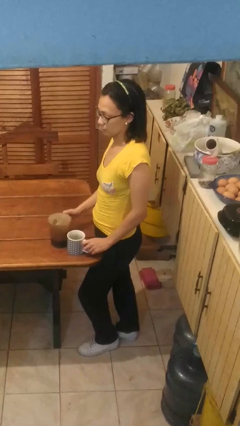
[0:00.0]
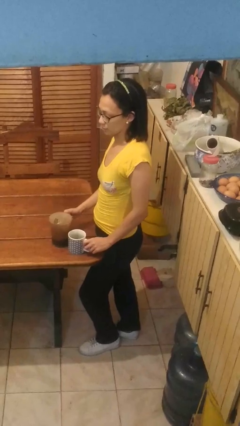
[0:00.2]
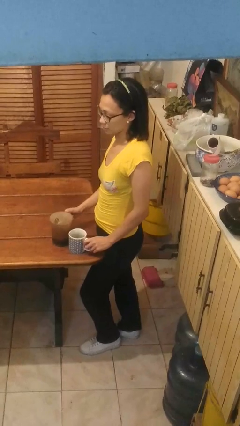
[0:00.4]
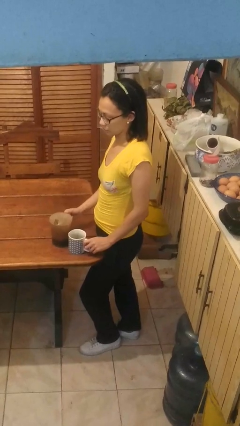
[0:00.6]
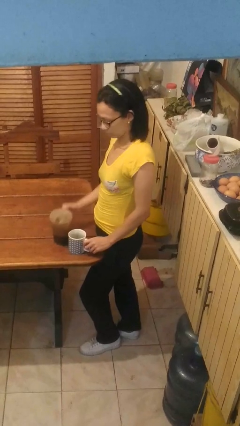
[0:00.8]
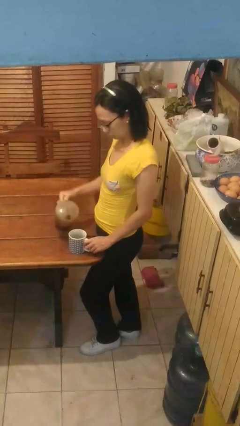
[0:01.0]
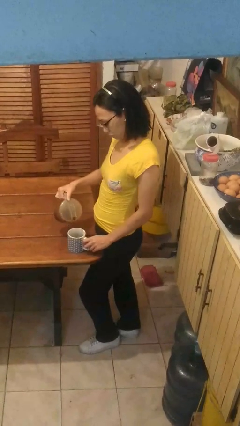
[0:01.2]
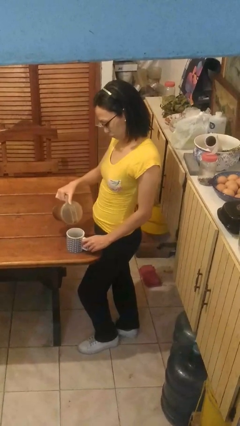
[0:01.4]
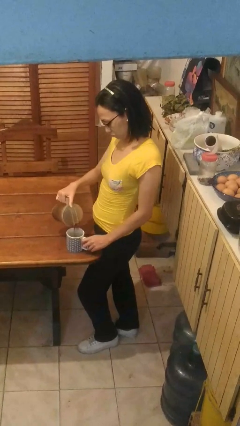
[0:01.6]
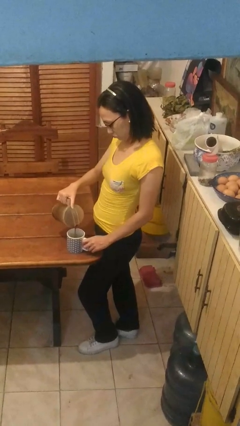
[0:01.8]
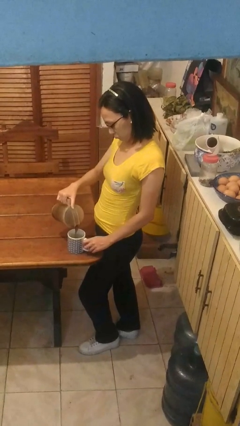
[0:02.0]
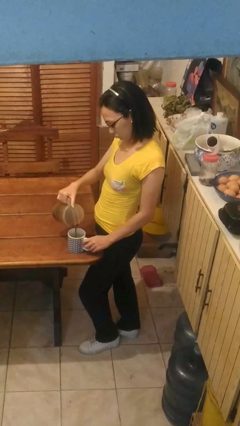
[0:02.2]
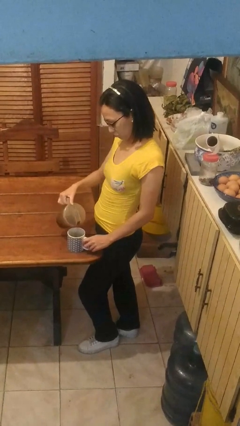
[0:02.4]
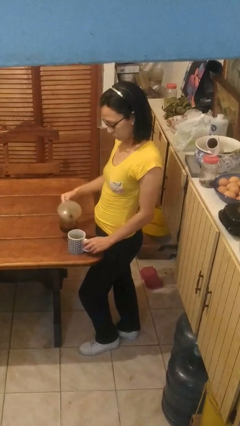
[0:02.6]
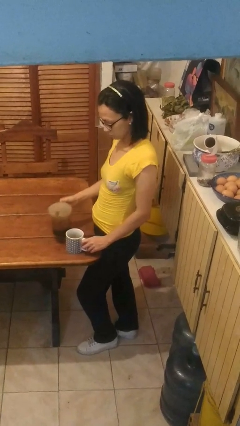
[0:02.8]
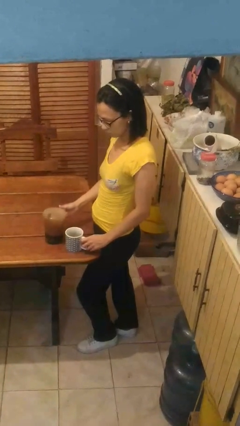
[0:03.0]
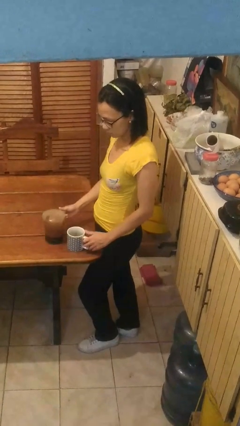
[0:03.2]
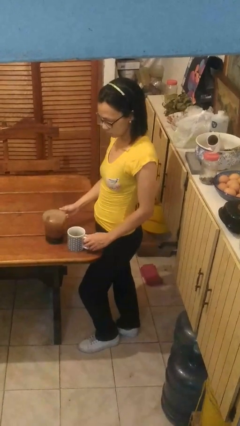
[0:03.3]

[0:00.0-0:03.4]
person pours coffee into mug

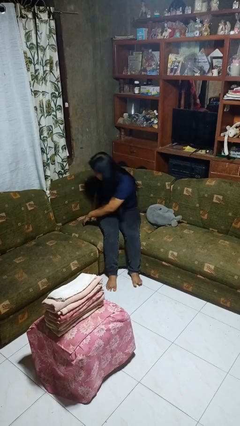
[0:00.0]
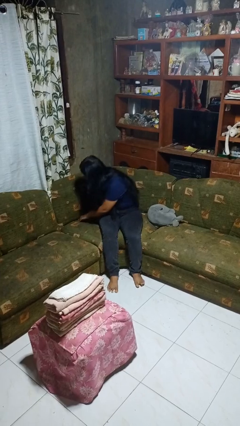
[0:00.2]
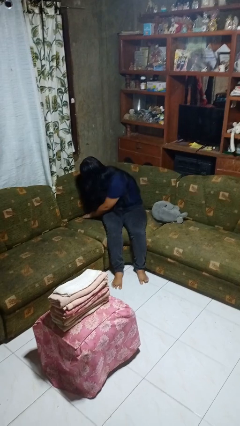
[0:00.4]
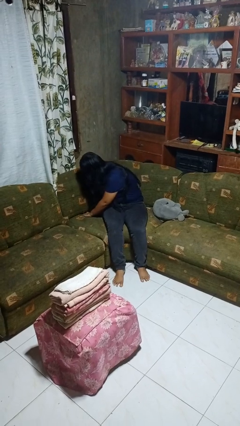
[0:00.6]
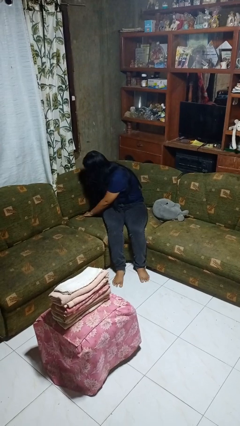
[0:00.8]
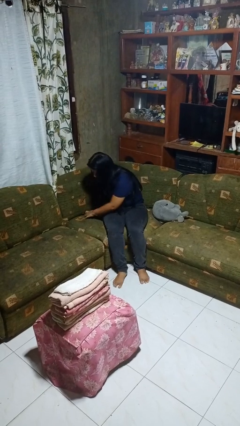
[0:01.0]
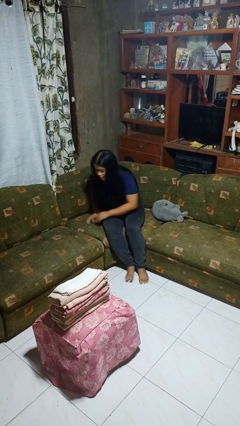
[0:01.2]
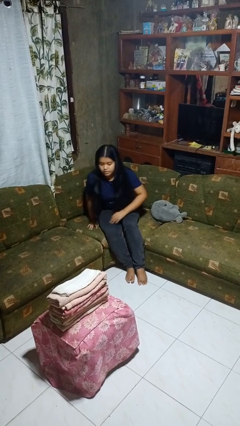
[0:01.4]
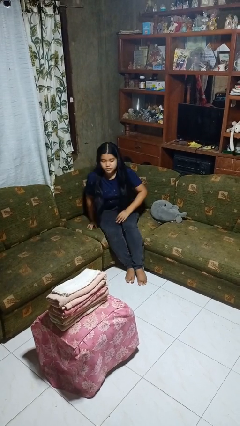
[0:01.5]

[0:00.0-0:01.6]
person searches in couch

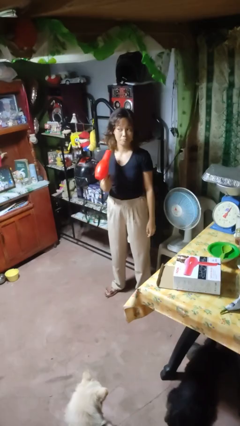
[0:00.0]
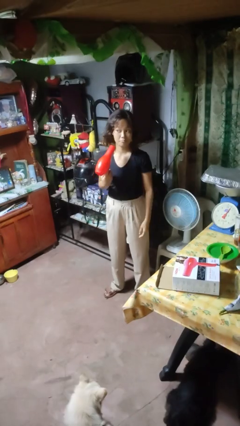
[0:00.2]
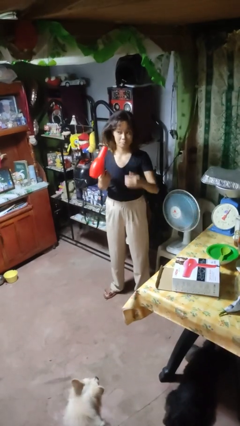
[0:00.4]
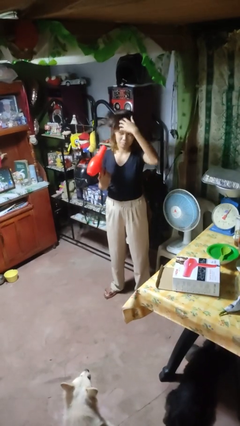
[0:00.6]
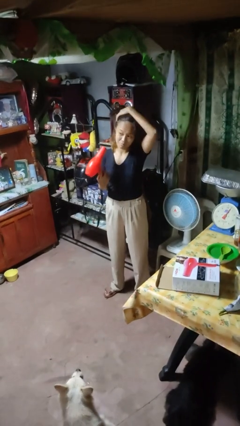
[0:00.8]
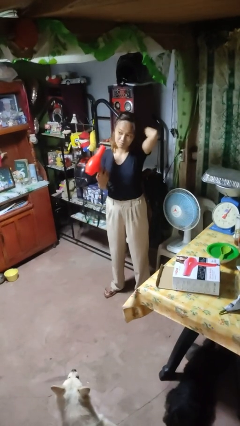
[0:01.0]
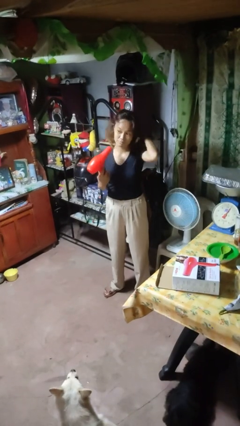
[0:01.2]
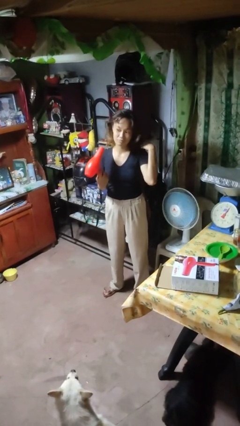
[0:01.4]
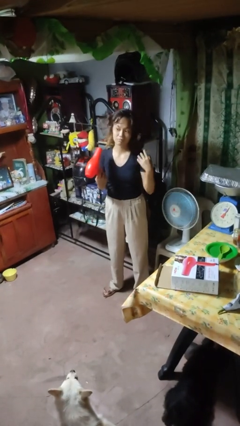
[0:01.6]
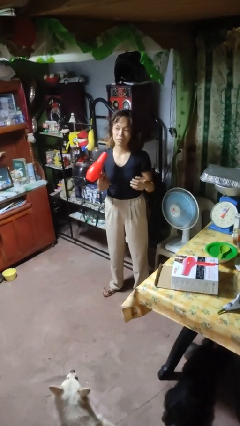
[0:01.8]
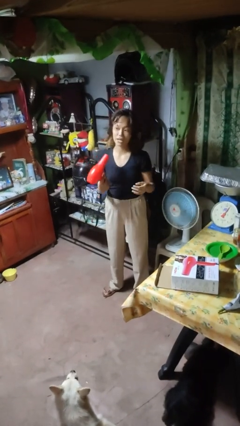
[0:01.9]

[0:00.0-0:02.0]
person dries hair with hairdryer

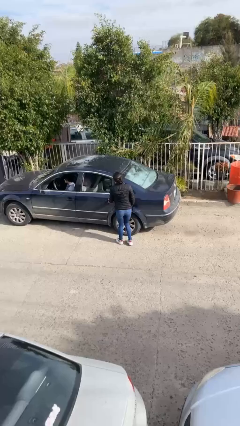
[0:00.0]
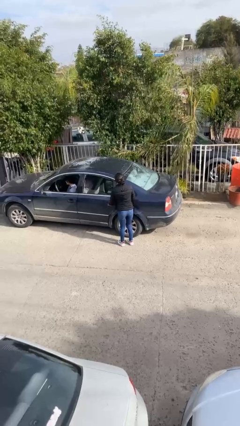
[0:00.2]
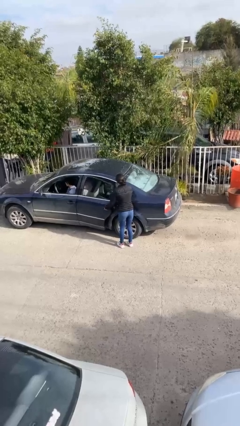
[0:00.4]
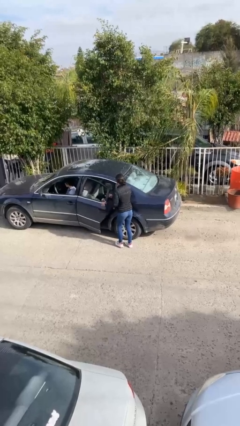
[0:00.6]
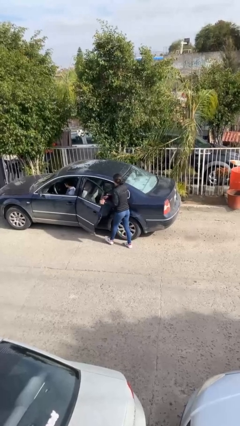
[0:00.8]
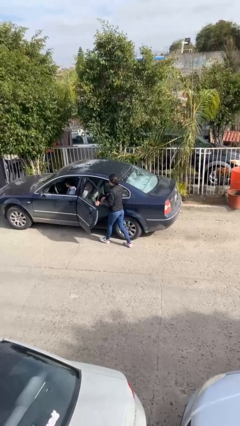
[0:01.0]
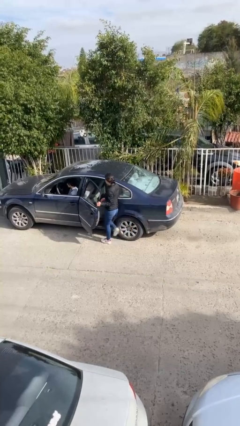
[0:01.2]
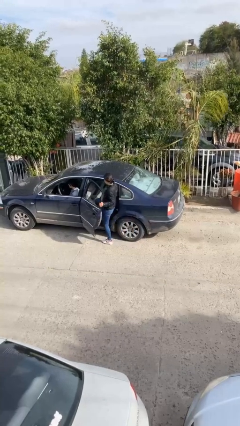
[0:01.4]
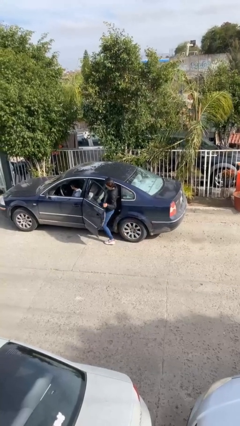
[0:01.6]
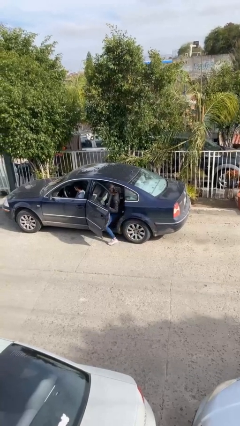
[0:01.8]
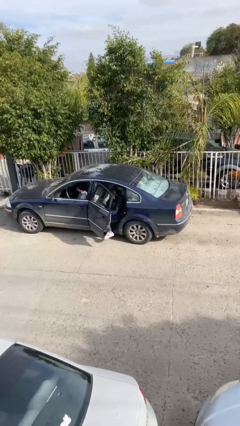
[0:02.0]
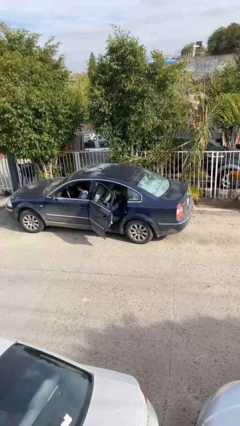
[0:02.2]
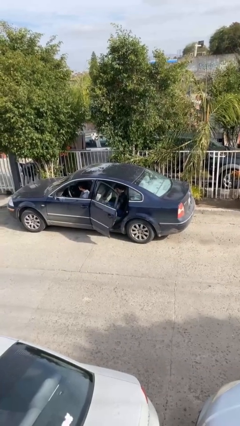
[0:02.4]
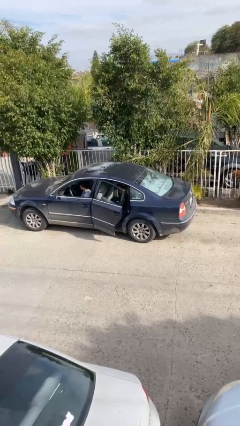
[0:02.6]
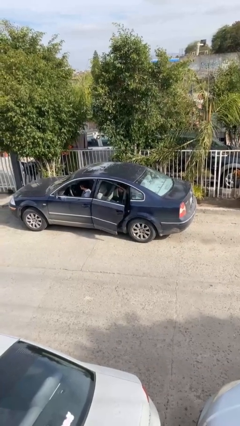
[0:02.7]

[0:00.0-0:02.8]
car picks up person

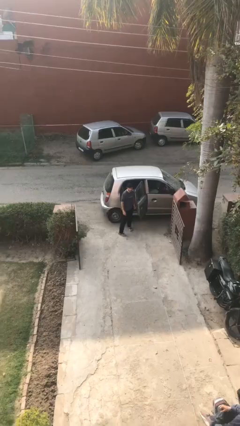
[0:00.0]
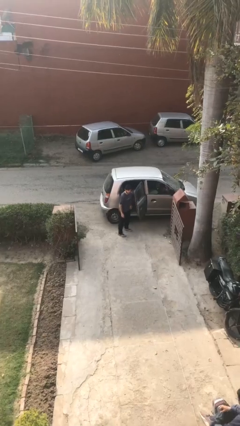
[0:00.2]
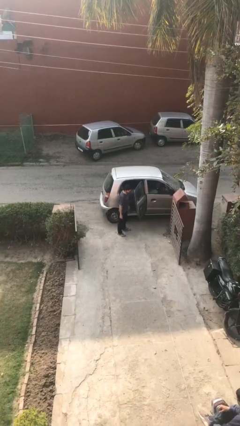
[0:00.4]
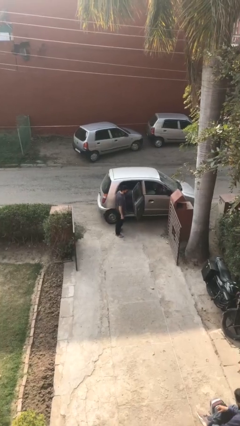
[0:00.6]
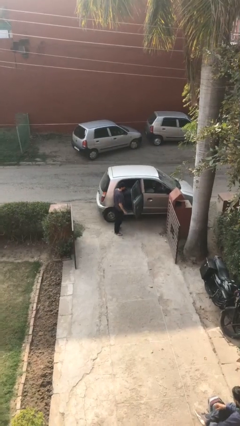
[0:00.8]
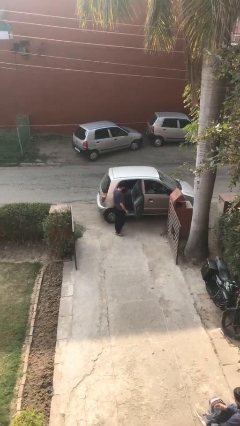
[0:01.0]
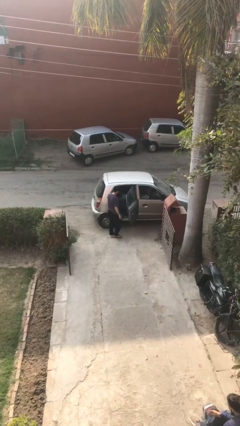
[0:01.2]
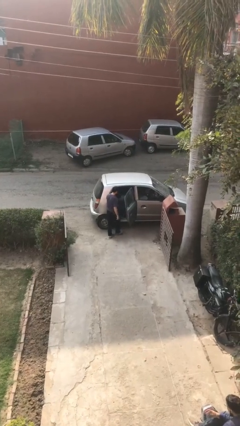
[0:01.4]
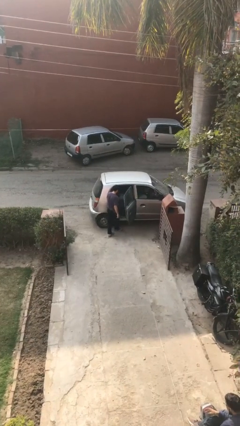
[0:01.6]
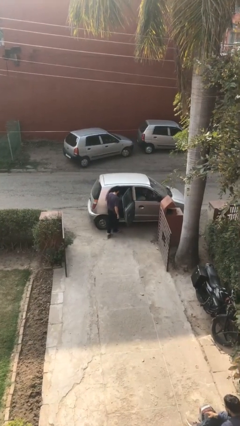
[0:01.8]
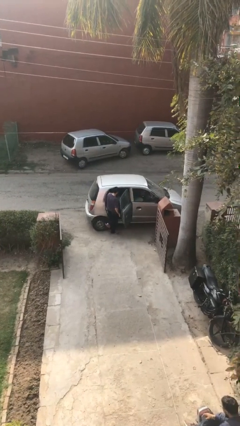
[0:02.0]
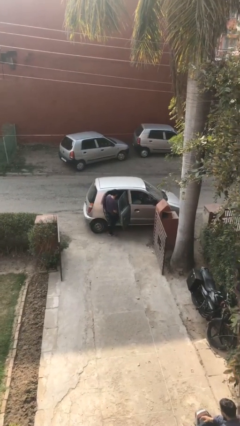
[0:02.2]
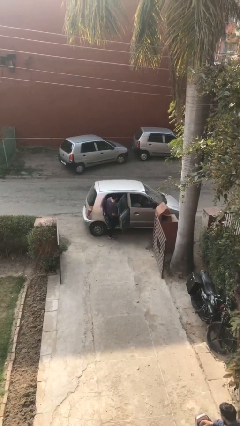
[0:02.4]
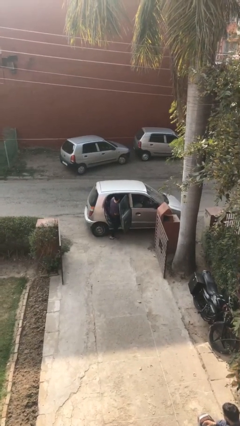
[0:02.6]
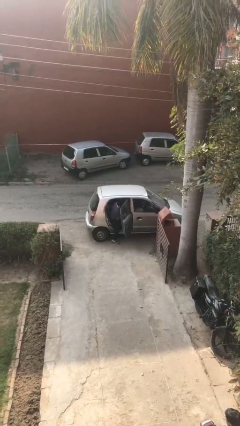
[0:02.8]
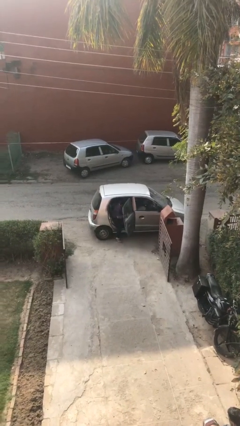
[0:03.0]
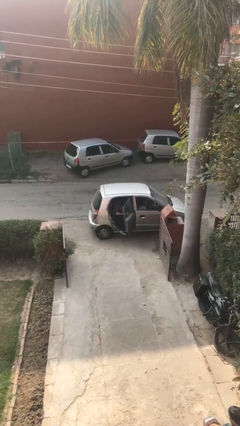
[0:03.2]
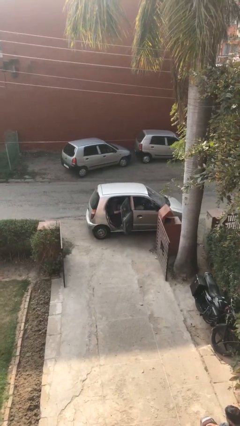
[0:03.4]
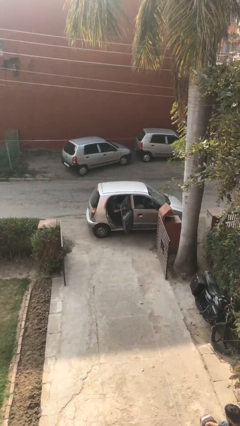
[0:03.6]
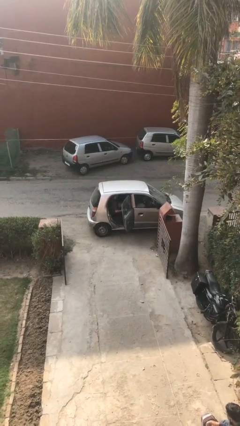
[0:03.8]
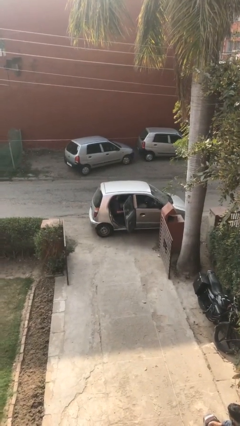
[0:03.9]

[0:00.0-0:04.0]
person enters car

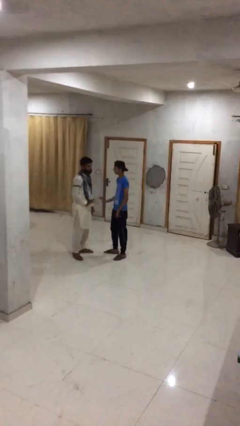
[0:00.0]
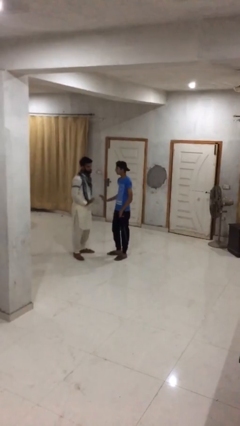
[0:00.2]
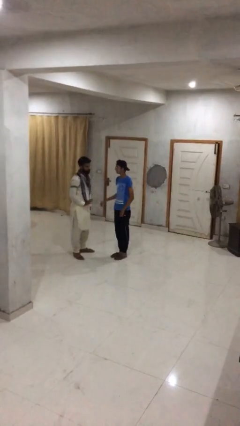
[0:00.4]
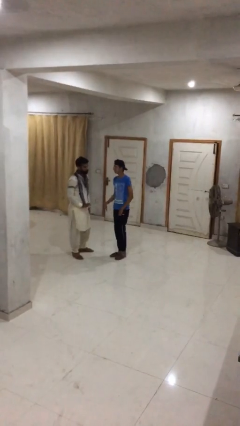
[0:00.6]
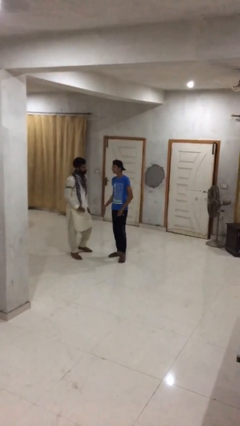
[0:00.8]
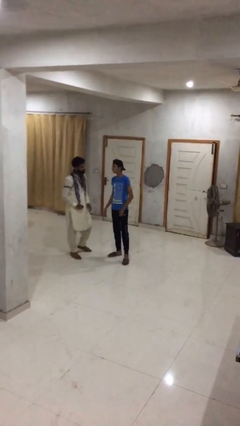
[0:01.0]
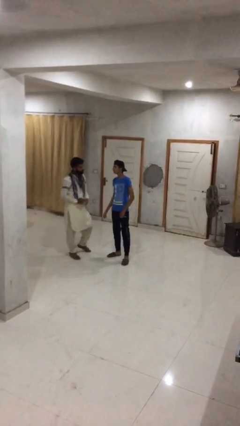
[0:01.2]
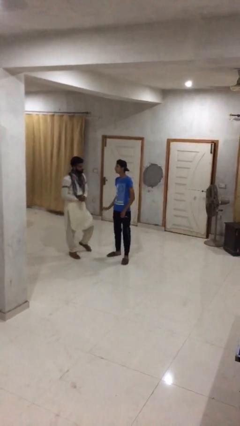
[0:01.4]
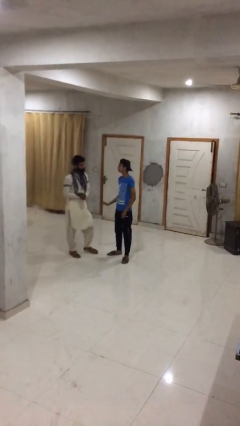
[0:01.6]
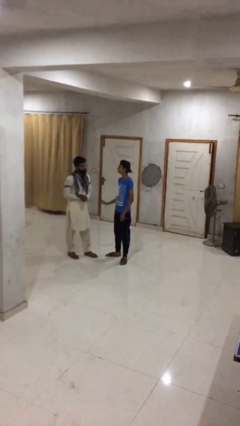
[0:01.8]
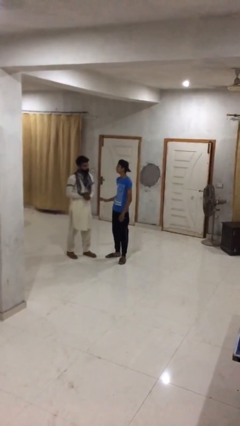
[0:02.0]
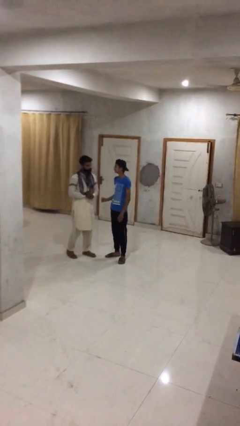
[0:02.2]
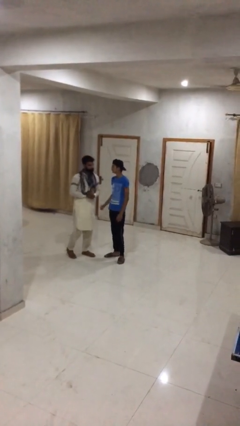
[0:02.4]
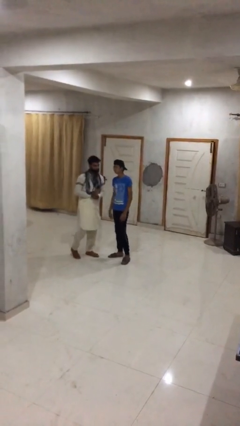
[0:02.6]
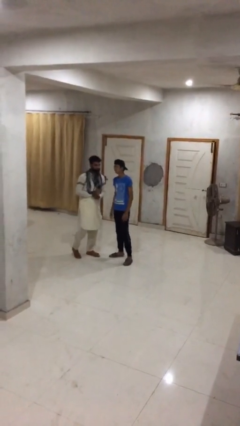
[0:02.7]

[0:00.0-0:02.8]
person talks to person

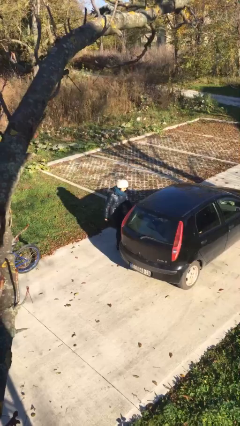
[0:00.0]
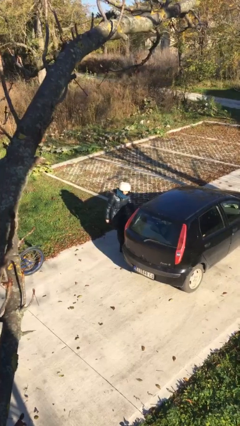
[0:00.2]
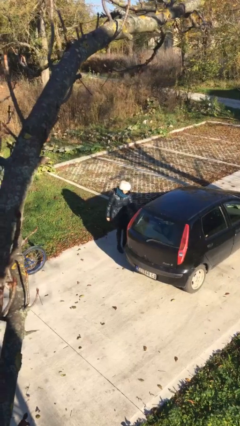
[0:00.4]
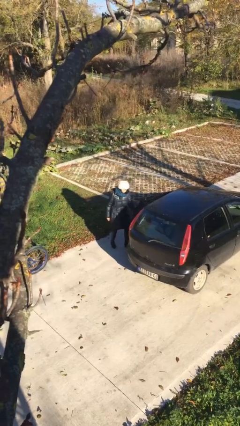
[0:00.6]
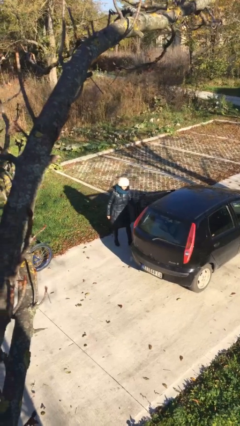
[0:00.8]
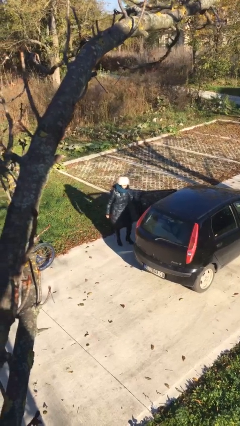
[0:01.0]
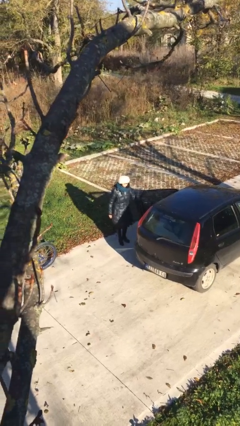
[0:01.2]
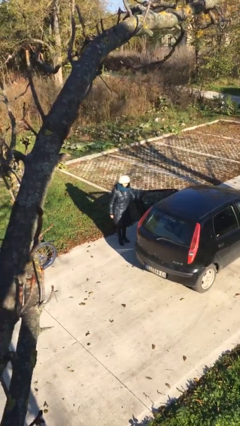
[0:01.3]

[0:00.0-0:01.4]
person opens car door
